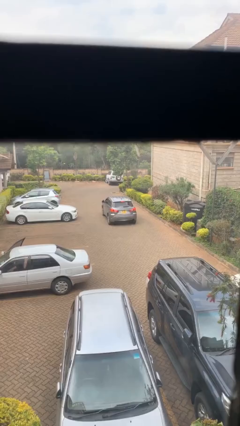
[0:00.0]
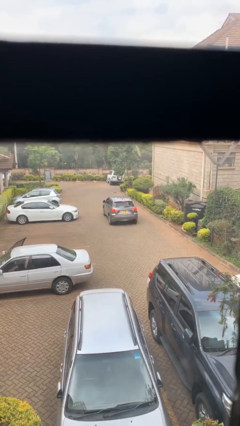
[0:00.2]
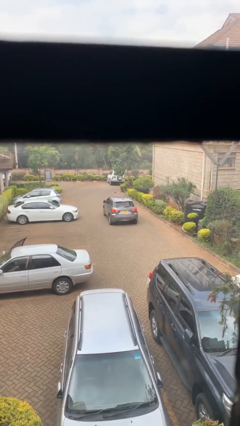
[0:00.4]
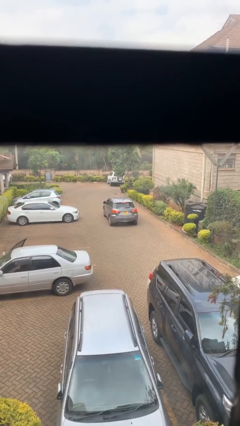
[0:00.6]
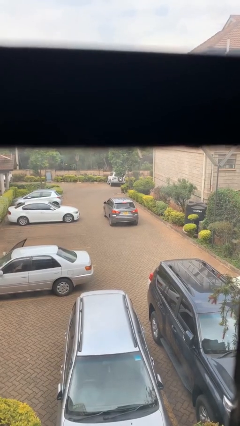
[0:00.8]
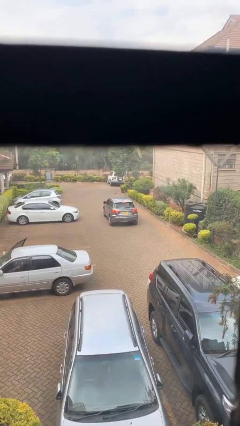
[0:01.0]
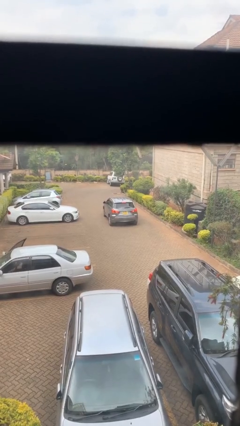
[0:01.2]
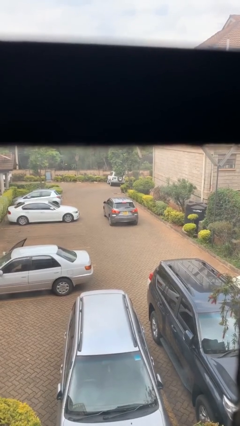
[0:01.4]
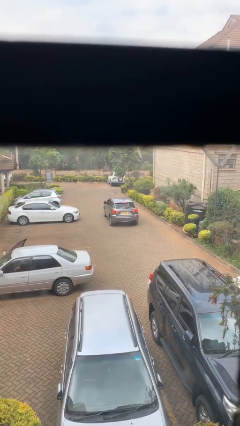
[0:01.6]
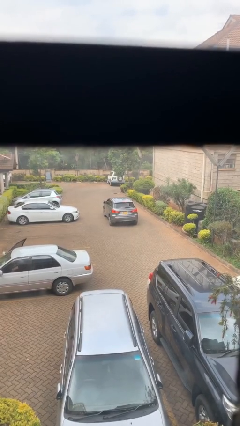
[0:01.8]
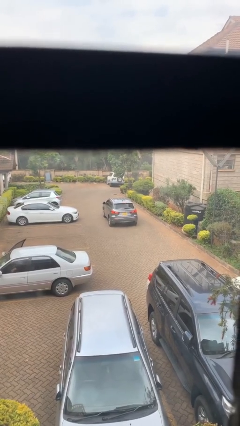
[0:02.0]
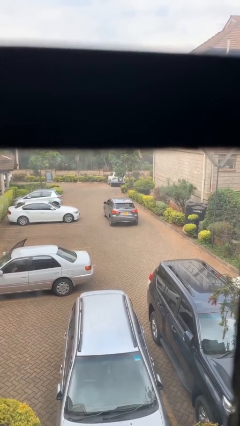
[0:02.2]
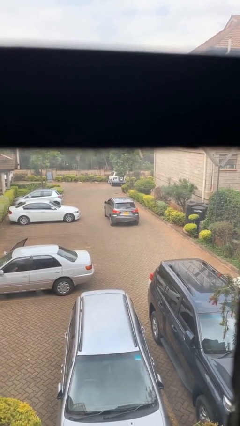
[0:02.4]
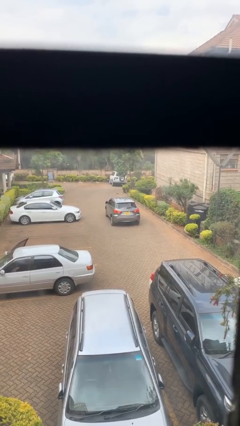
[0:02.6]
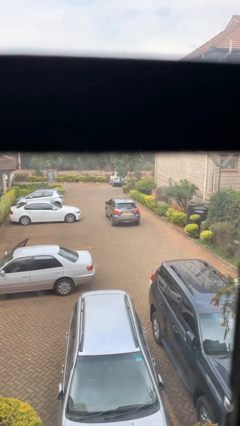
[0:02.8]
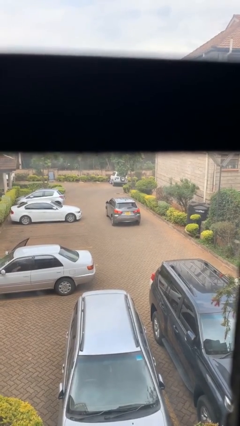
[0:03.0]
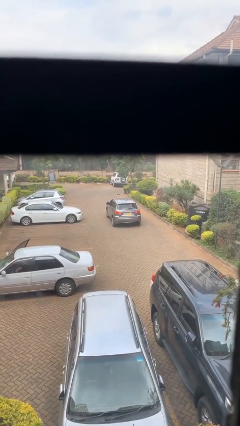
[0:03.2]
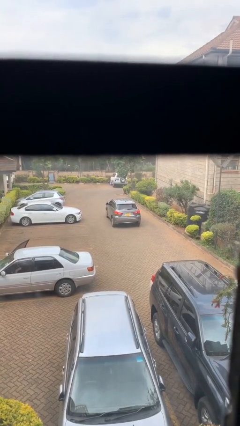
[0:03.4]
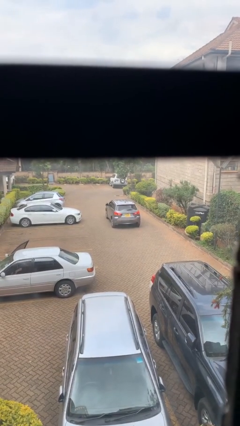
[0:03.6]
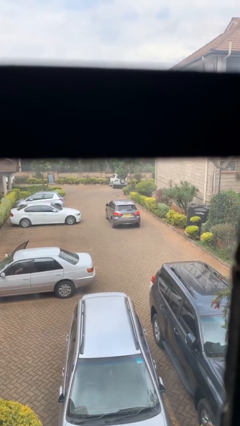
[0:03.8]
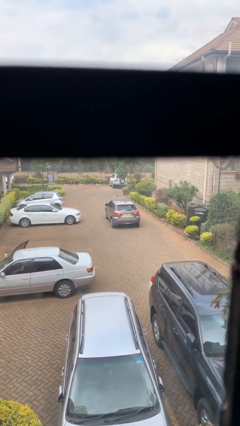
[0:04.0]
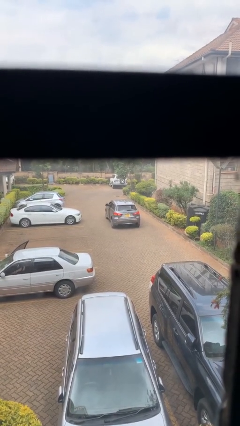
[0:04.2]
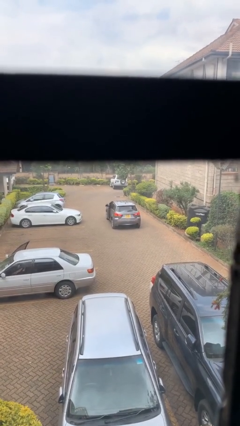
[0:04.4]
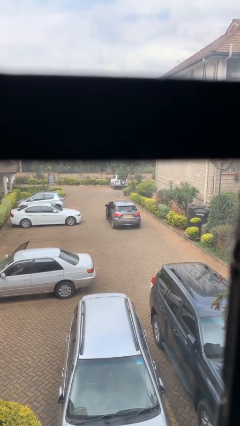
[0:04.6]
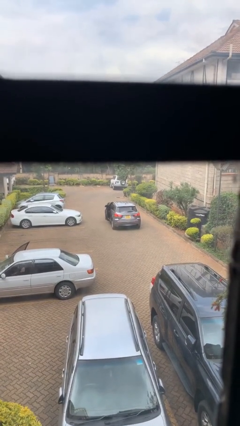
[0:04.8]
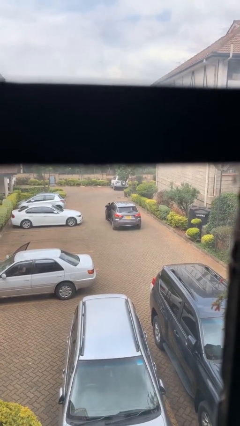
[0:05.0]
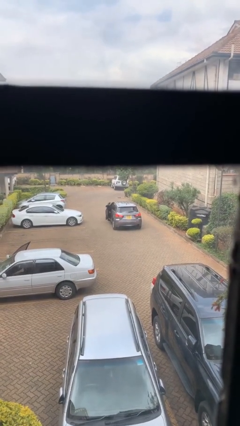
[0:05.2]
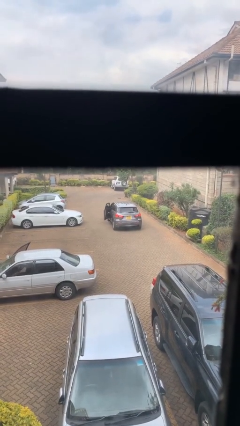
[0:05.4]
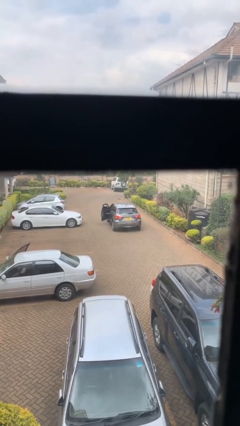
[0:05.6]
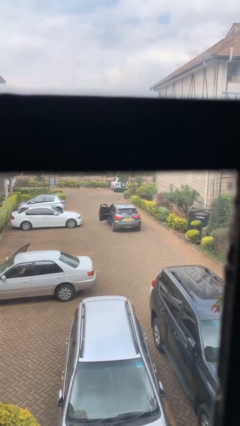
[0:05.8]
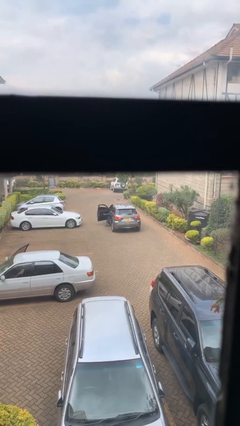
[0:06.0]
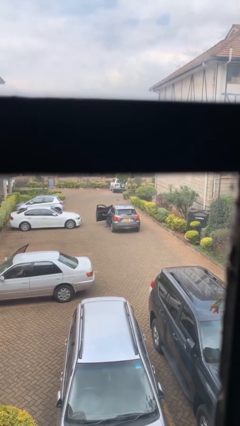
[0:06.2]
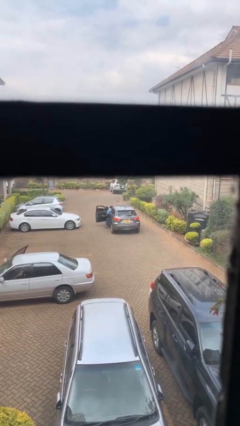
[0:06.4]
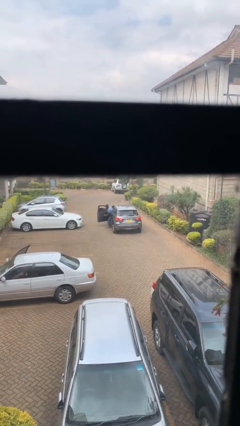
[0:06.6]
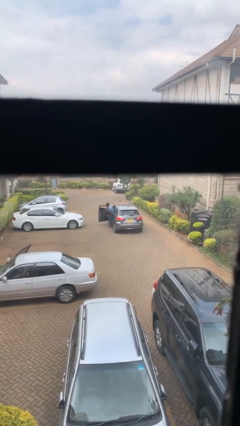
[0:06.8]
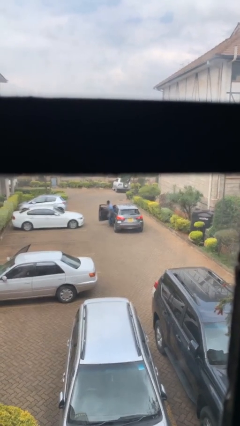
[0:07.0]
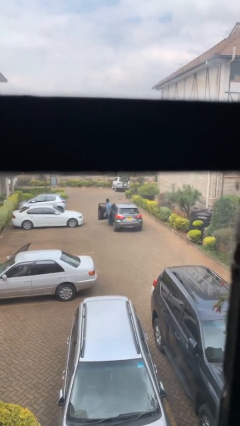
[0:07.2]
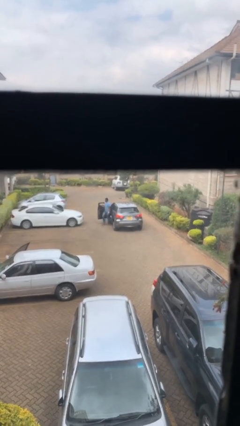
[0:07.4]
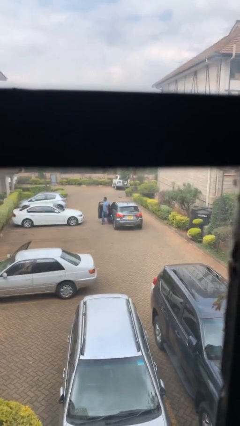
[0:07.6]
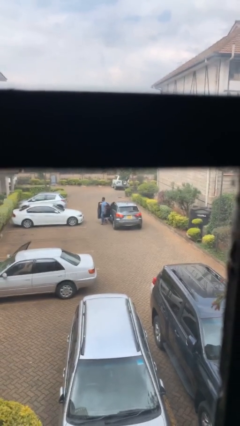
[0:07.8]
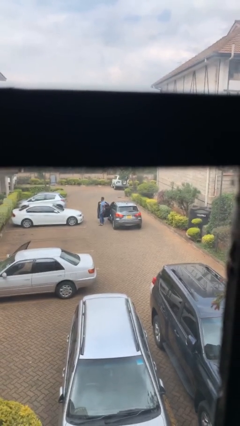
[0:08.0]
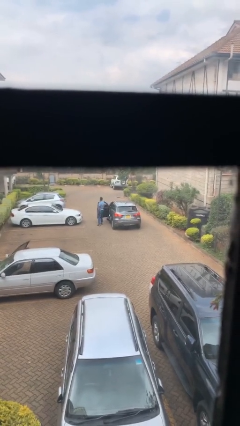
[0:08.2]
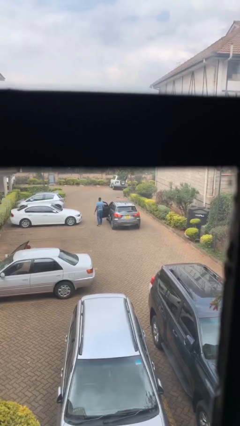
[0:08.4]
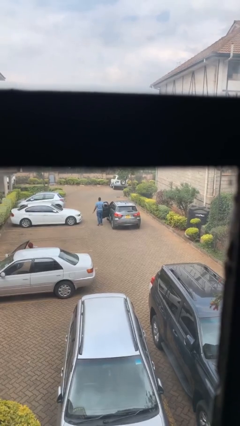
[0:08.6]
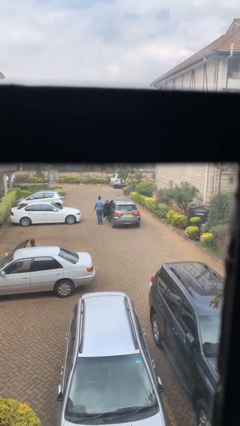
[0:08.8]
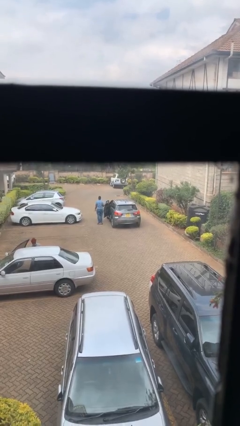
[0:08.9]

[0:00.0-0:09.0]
car drops off person

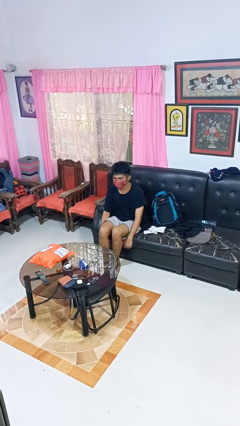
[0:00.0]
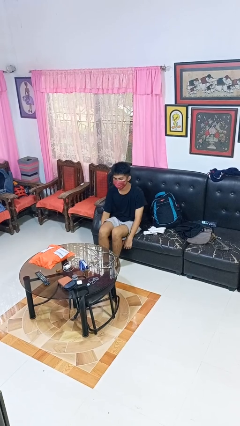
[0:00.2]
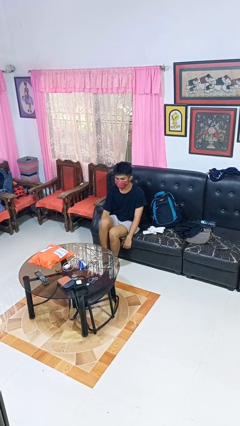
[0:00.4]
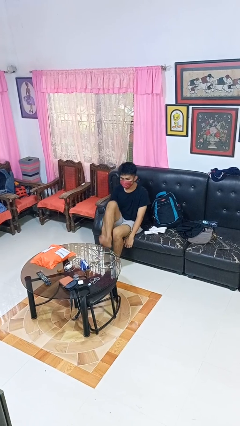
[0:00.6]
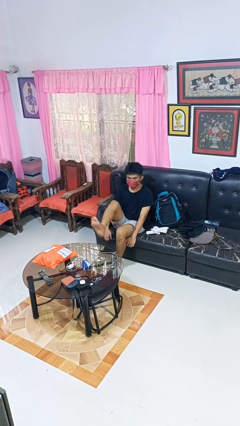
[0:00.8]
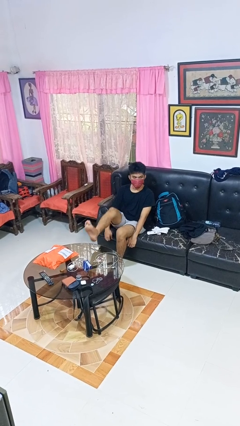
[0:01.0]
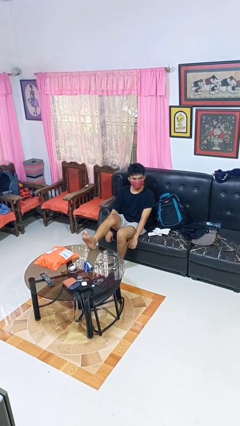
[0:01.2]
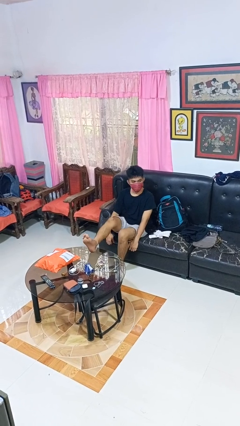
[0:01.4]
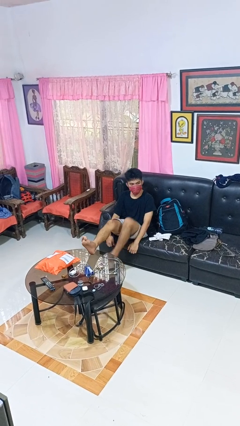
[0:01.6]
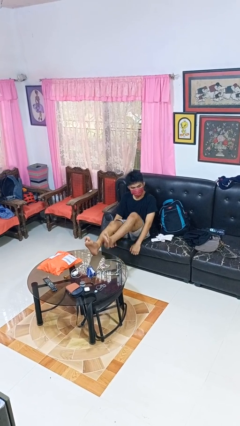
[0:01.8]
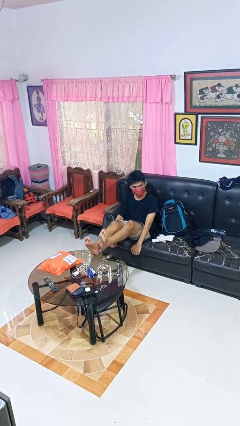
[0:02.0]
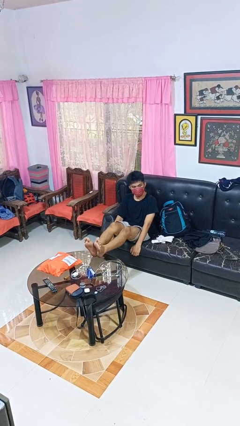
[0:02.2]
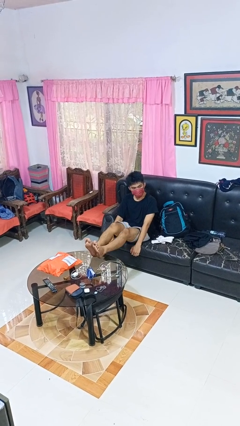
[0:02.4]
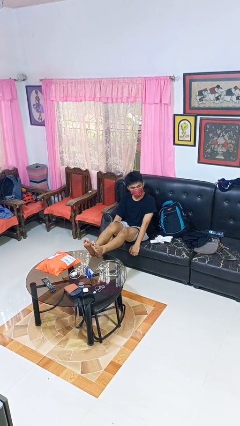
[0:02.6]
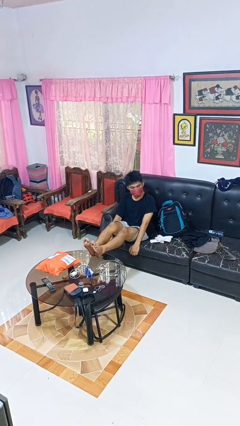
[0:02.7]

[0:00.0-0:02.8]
person puts feet up

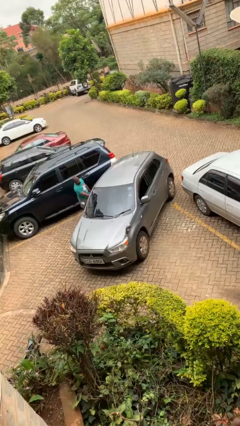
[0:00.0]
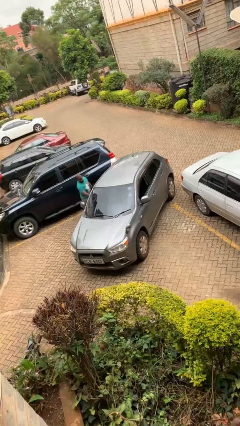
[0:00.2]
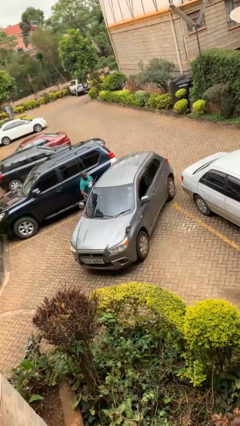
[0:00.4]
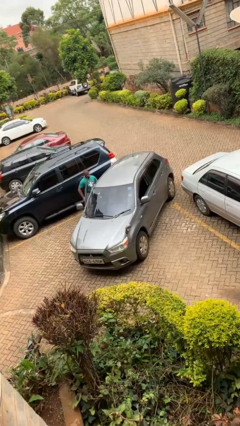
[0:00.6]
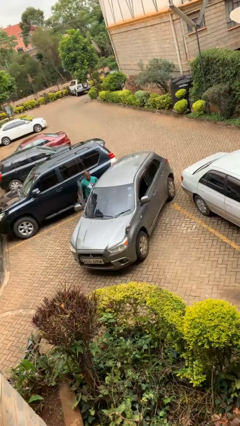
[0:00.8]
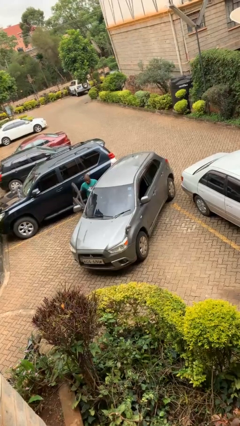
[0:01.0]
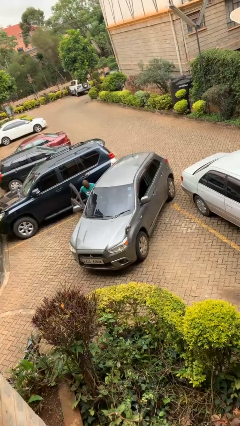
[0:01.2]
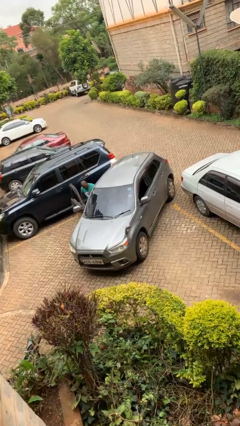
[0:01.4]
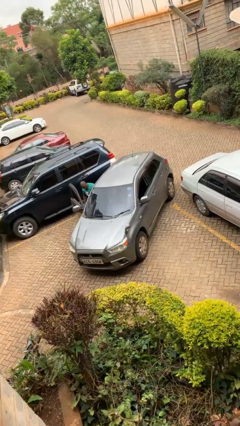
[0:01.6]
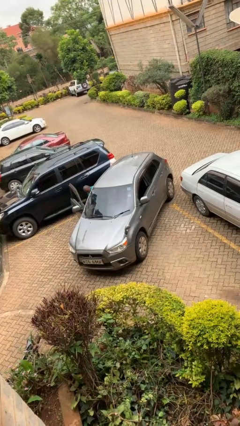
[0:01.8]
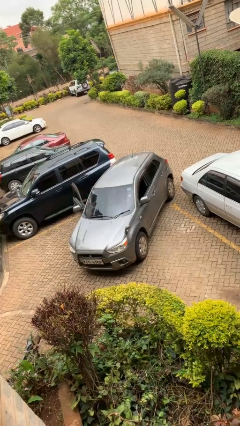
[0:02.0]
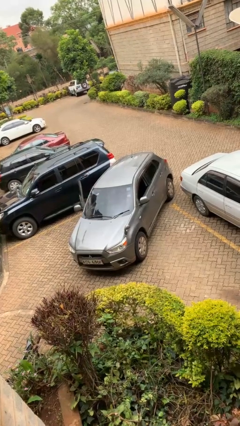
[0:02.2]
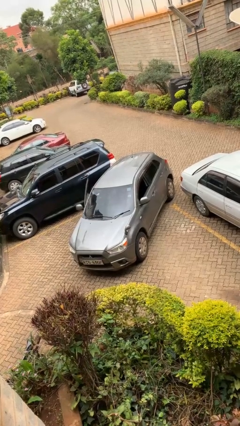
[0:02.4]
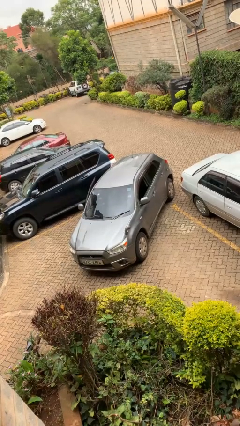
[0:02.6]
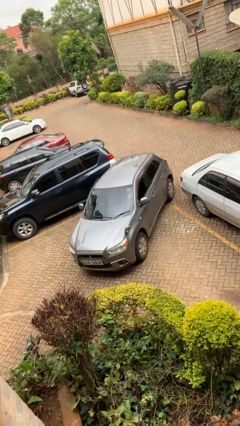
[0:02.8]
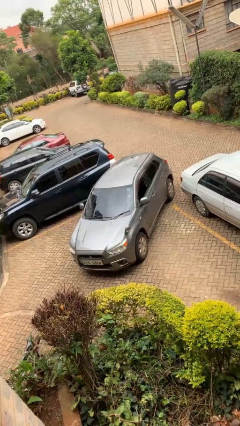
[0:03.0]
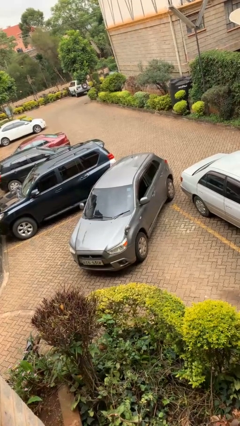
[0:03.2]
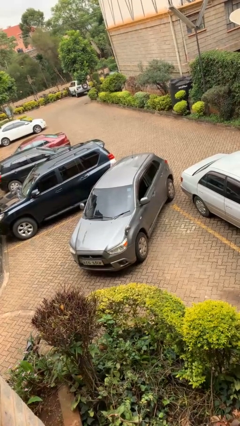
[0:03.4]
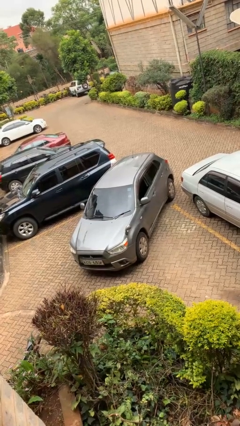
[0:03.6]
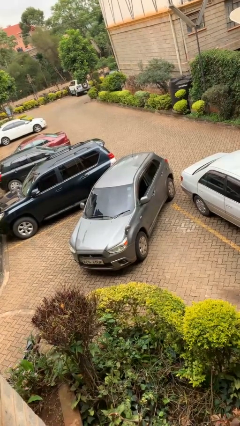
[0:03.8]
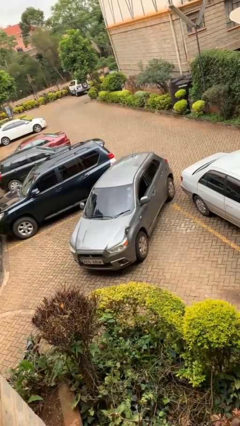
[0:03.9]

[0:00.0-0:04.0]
car picks up person

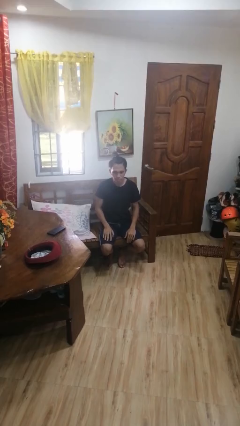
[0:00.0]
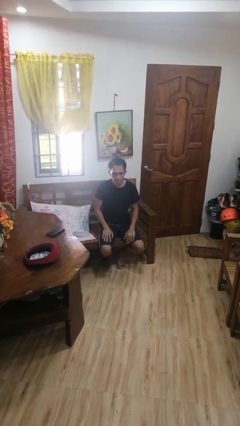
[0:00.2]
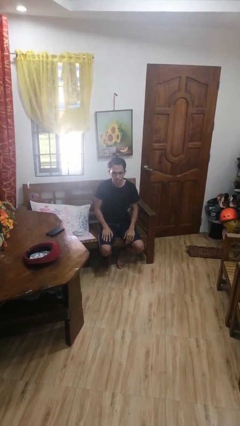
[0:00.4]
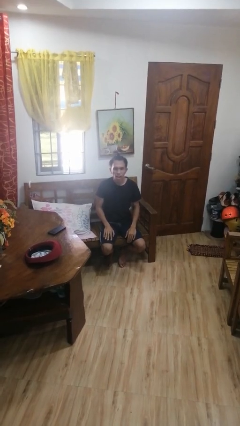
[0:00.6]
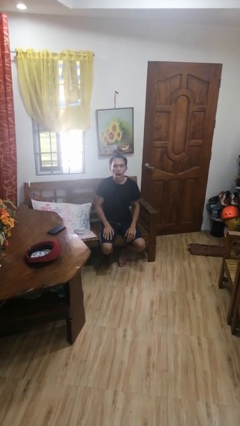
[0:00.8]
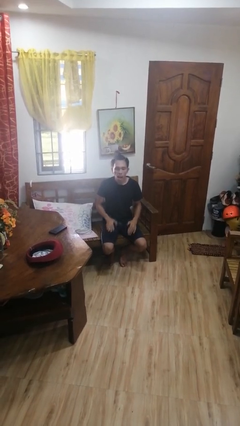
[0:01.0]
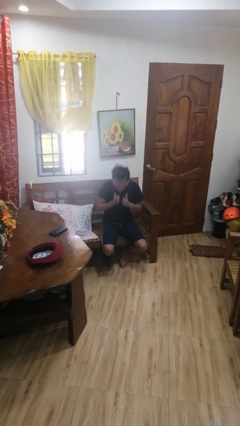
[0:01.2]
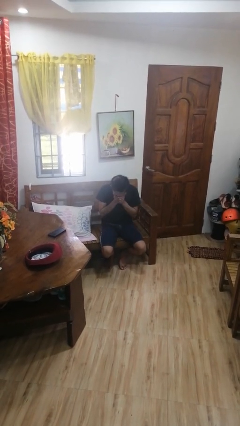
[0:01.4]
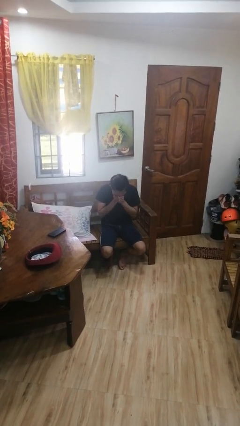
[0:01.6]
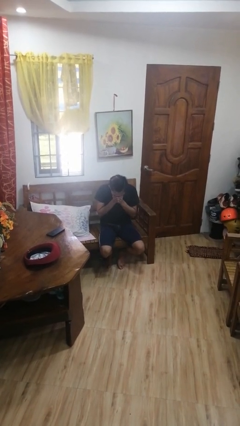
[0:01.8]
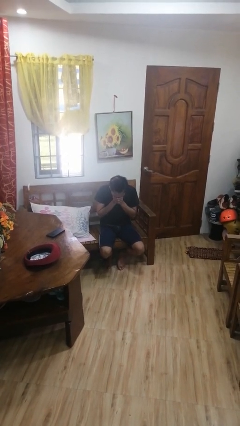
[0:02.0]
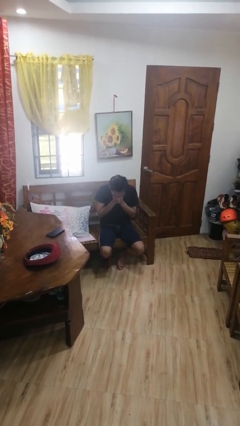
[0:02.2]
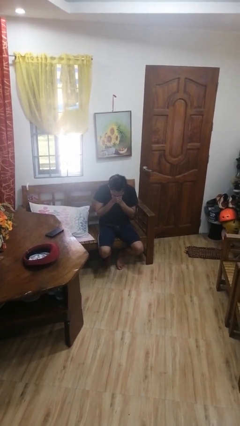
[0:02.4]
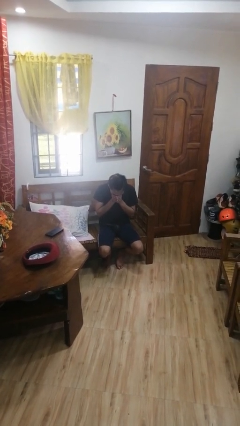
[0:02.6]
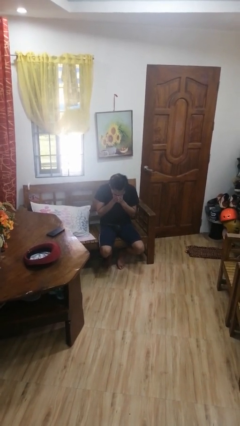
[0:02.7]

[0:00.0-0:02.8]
person sneezes into hand
